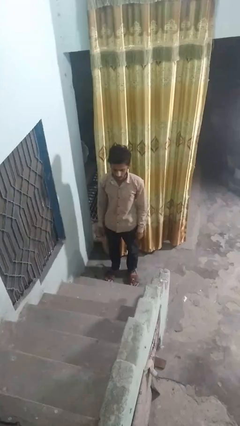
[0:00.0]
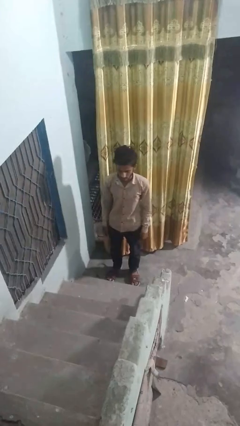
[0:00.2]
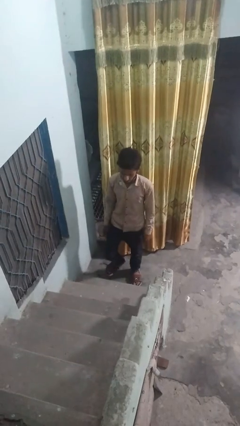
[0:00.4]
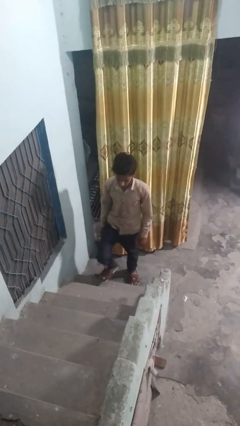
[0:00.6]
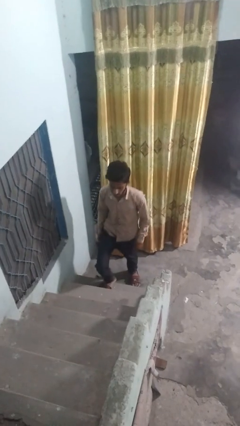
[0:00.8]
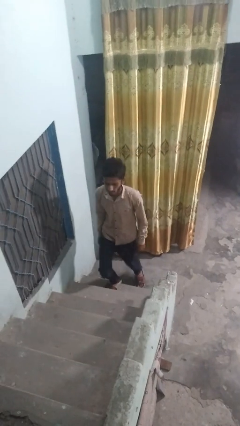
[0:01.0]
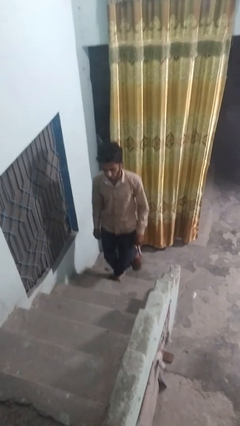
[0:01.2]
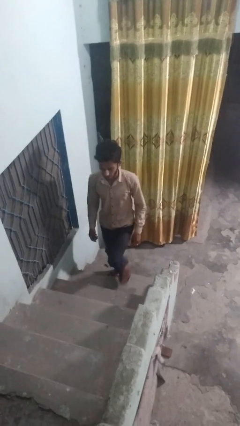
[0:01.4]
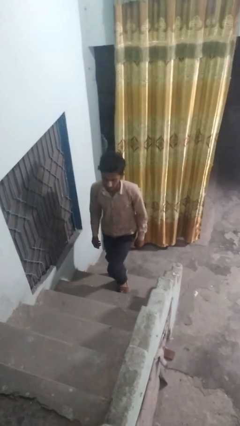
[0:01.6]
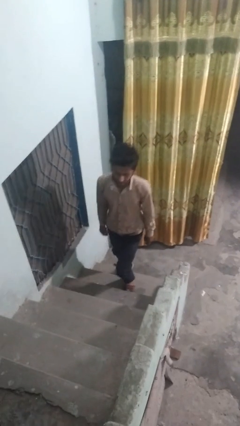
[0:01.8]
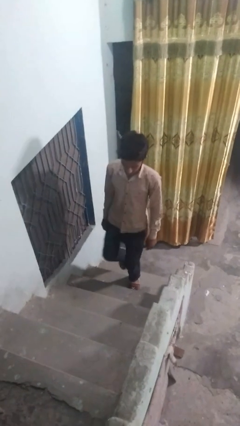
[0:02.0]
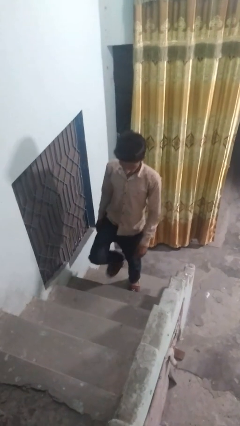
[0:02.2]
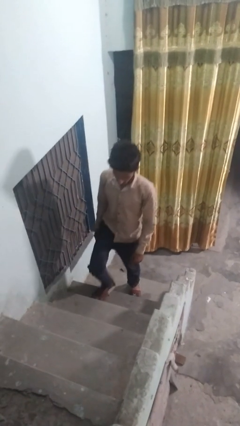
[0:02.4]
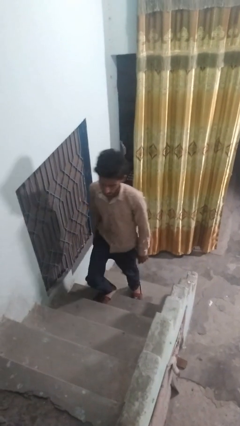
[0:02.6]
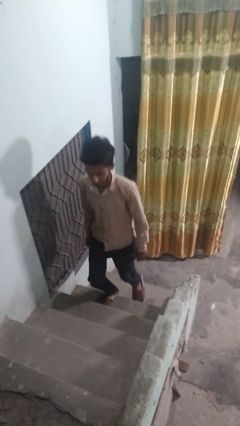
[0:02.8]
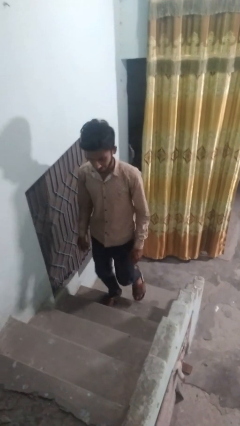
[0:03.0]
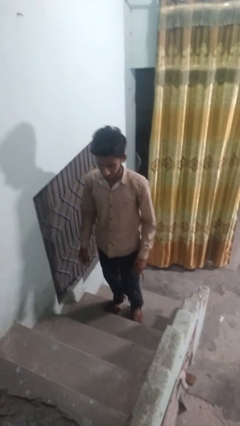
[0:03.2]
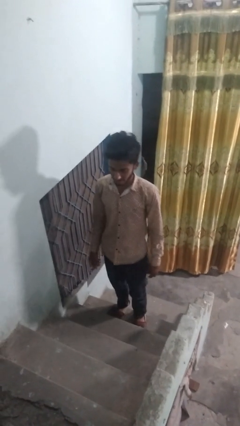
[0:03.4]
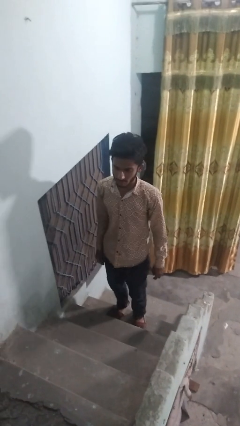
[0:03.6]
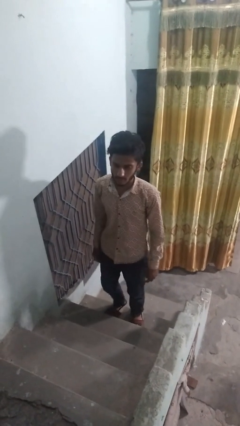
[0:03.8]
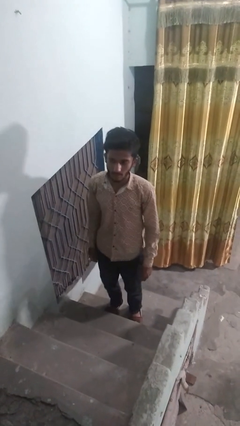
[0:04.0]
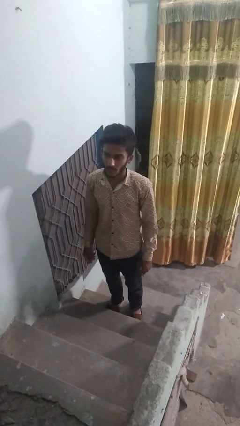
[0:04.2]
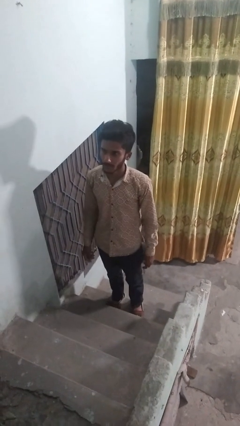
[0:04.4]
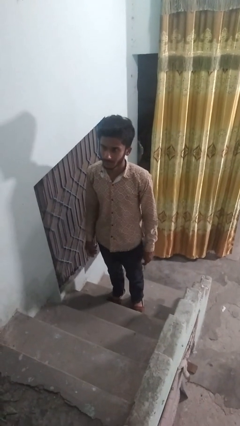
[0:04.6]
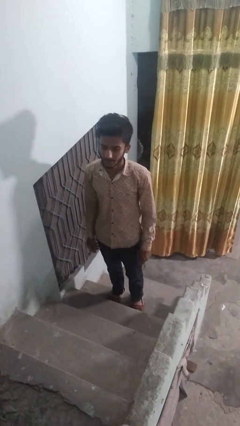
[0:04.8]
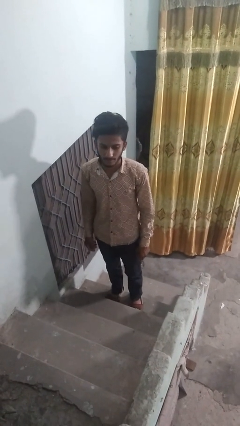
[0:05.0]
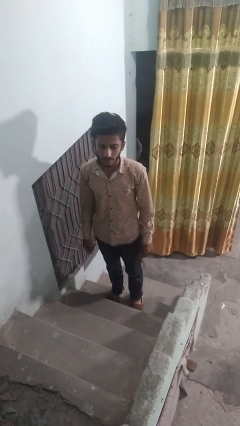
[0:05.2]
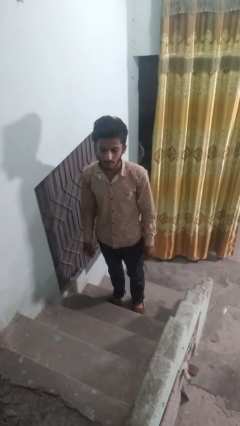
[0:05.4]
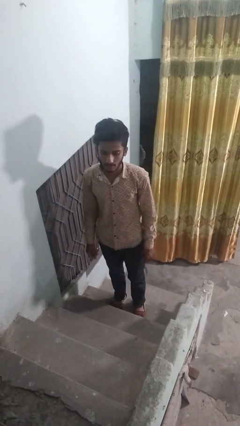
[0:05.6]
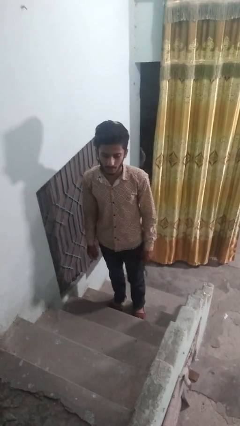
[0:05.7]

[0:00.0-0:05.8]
person climbs up stairs

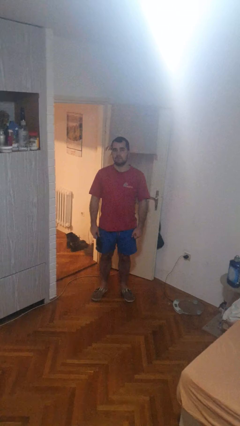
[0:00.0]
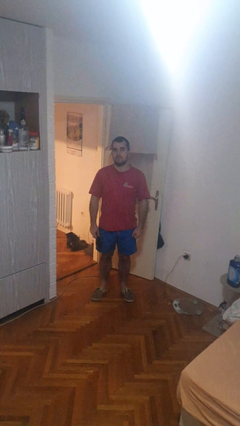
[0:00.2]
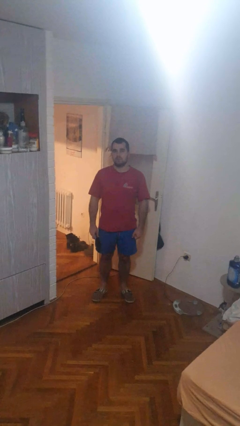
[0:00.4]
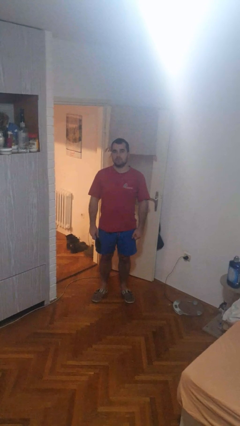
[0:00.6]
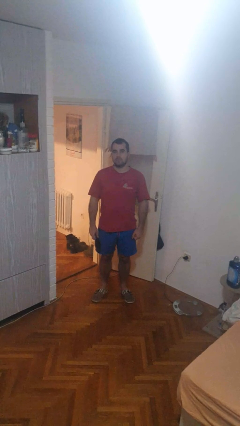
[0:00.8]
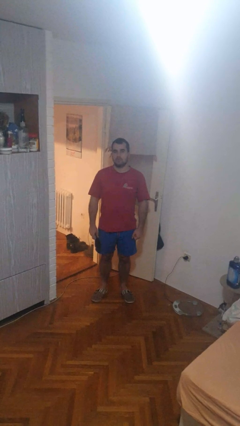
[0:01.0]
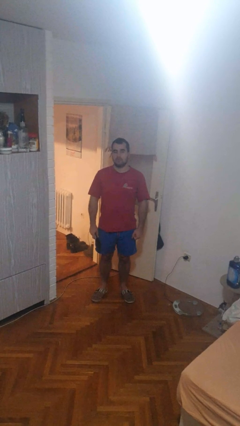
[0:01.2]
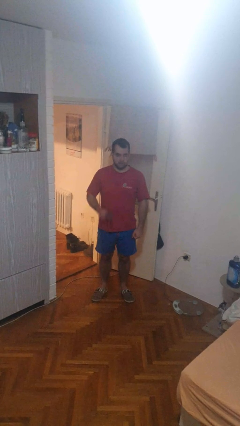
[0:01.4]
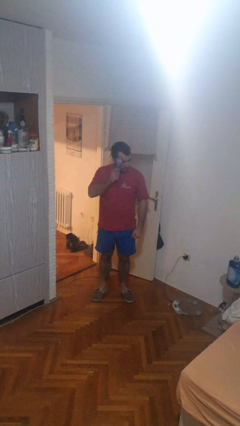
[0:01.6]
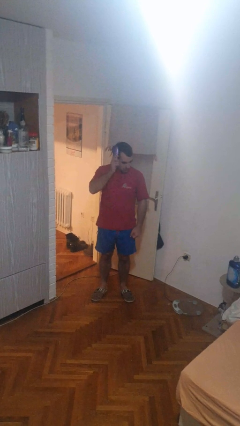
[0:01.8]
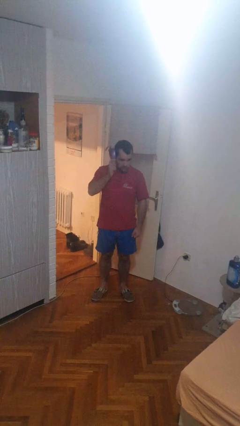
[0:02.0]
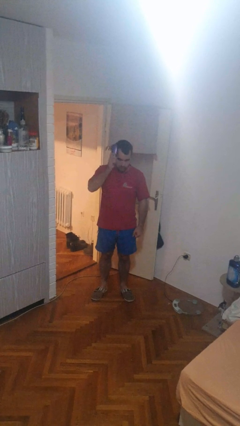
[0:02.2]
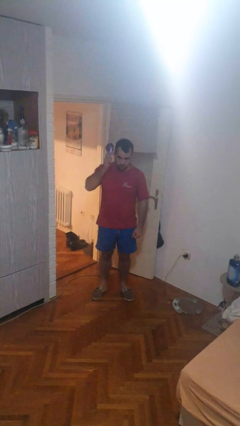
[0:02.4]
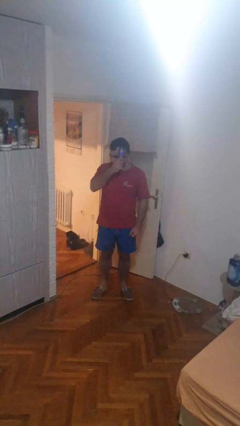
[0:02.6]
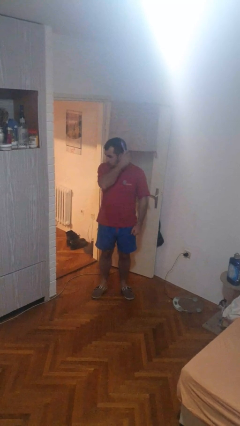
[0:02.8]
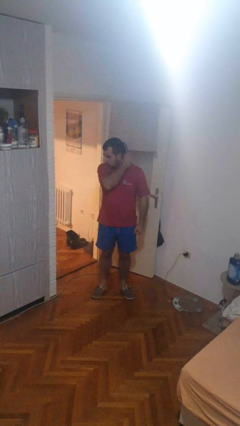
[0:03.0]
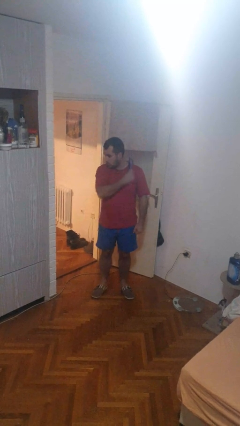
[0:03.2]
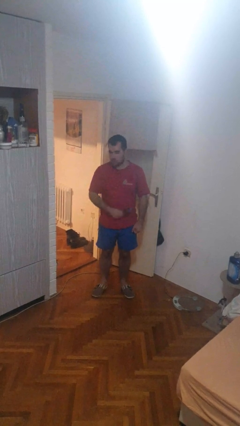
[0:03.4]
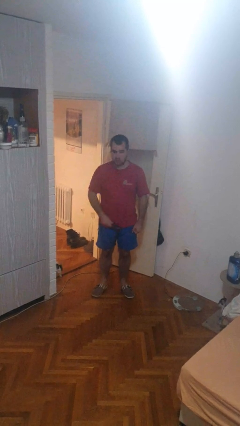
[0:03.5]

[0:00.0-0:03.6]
person brushes hair

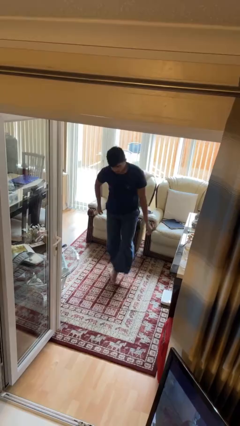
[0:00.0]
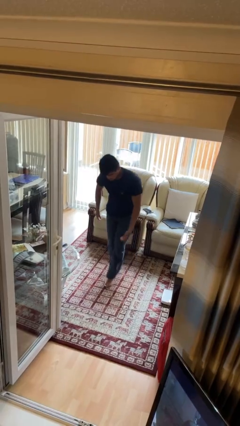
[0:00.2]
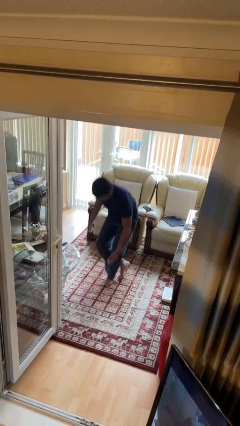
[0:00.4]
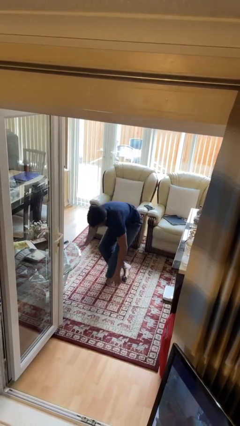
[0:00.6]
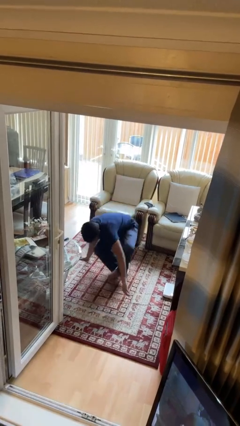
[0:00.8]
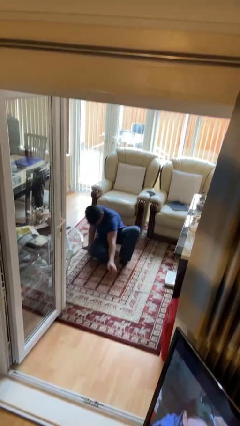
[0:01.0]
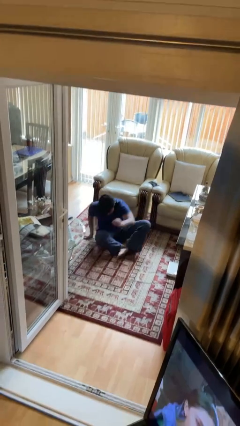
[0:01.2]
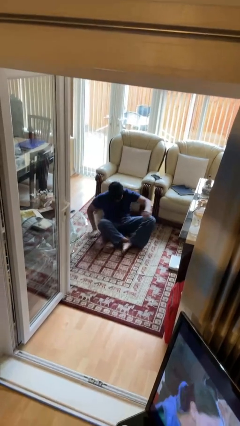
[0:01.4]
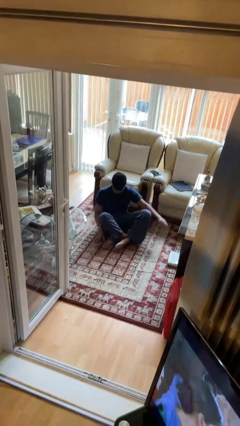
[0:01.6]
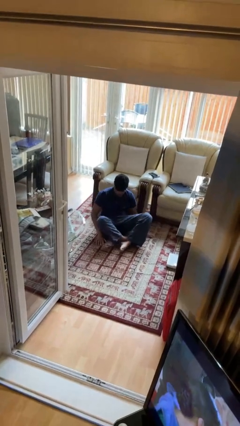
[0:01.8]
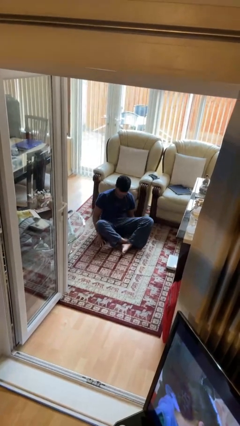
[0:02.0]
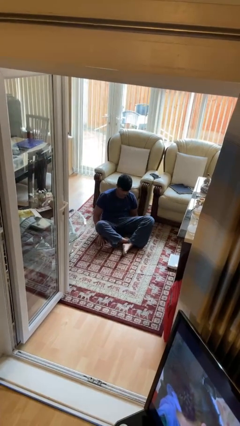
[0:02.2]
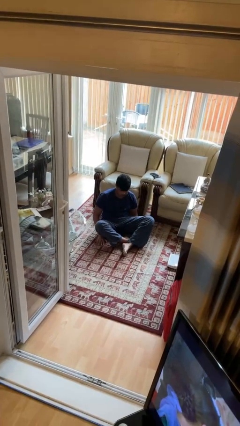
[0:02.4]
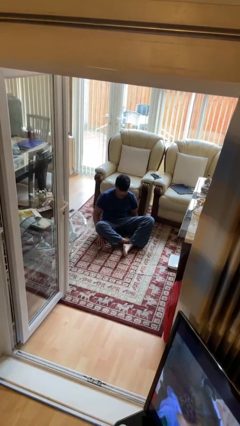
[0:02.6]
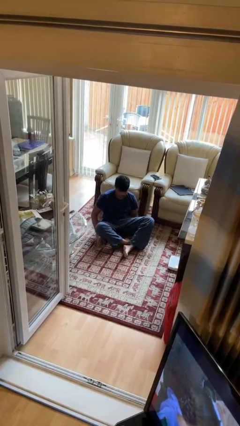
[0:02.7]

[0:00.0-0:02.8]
person sits crisscross

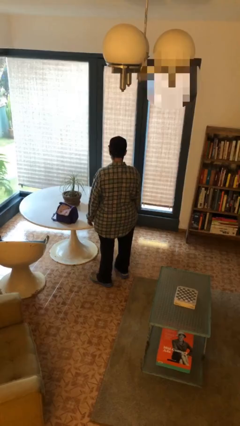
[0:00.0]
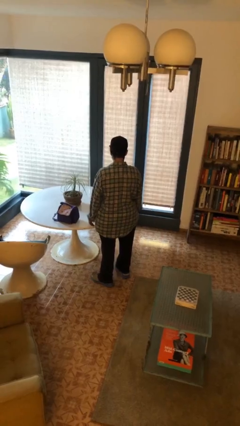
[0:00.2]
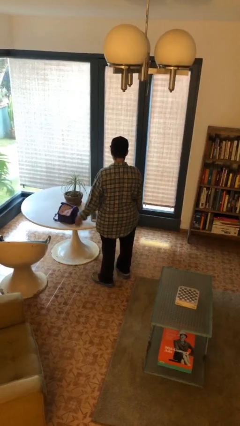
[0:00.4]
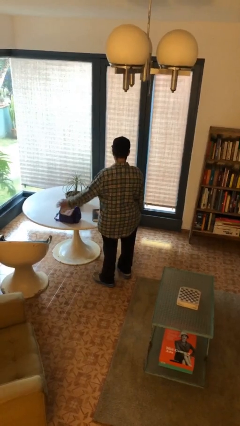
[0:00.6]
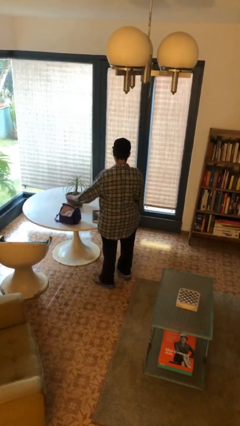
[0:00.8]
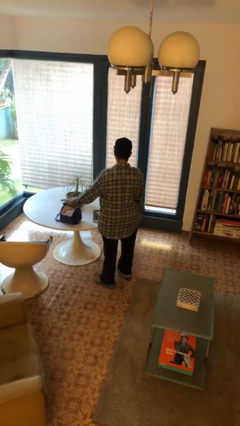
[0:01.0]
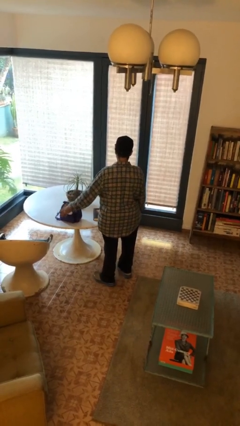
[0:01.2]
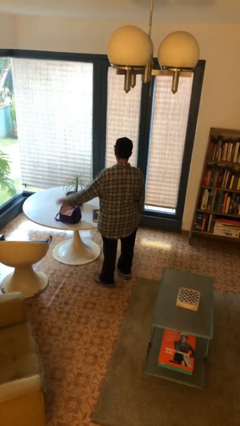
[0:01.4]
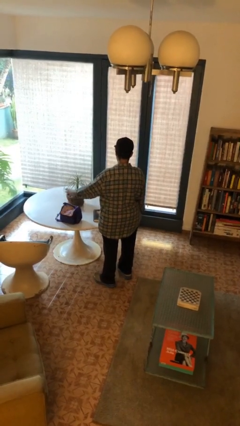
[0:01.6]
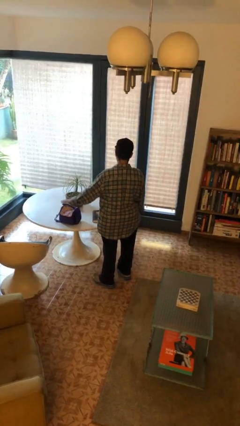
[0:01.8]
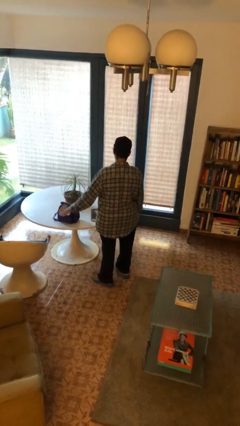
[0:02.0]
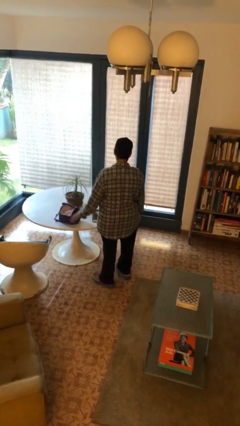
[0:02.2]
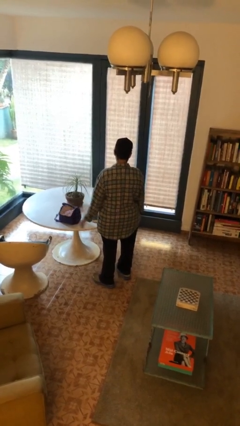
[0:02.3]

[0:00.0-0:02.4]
person waves hand over object

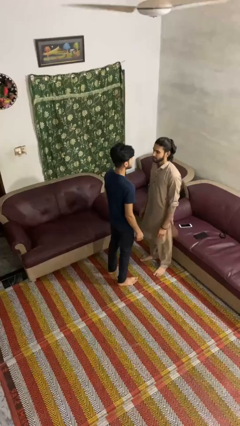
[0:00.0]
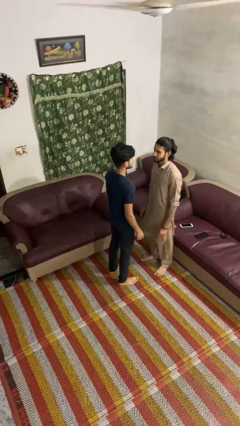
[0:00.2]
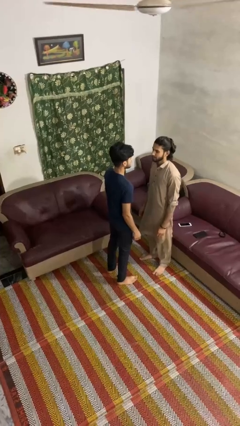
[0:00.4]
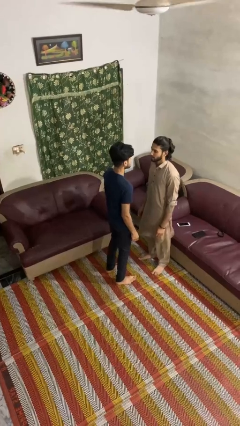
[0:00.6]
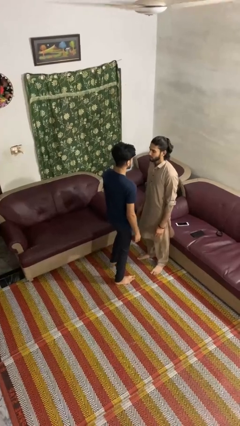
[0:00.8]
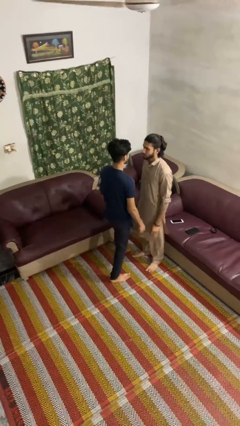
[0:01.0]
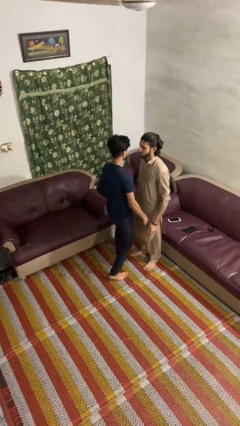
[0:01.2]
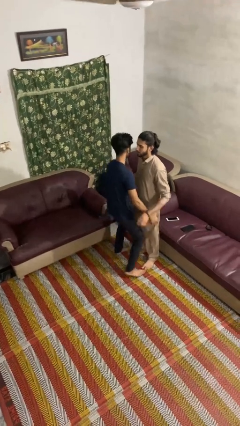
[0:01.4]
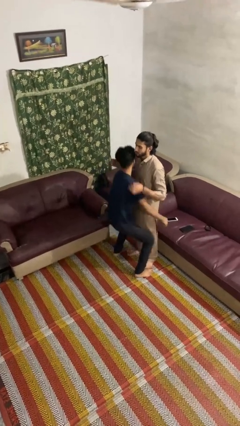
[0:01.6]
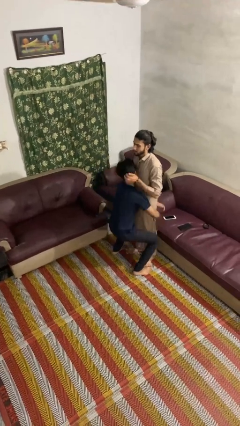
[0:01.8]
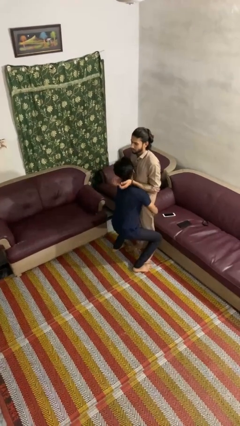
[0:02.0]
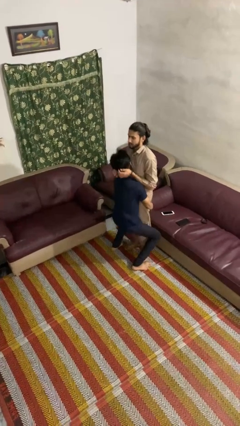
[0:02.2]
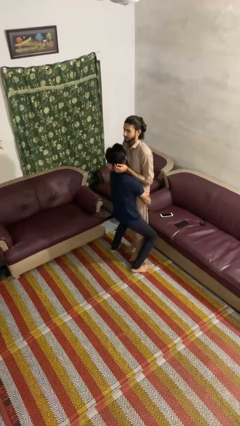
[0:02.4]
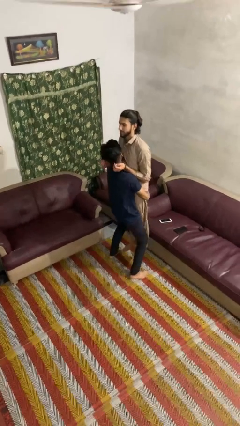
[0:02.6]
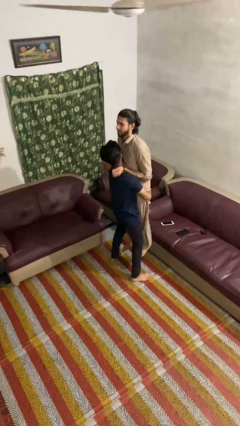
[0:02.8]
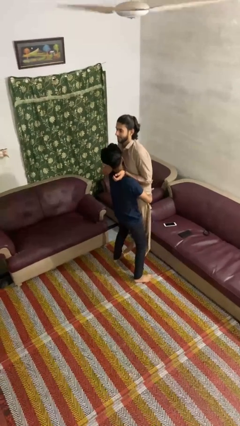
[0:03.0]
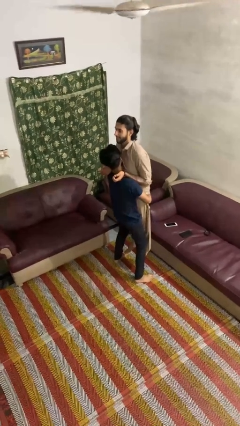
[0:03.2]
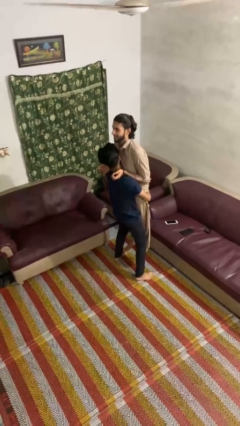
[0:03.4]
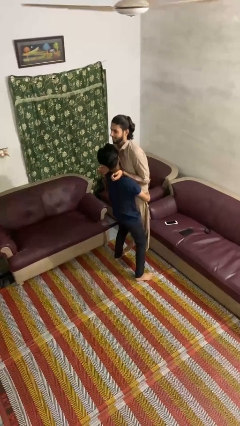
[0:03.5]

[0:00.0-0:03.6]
person picks up person
